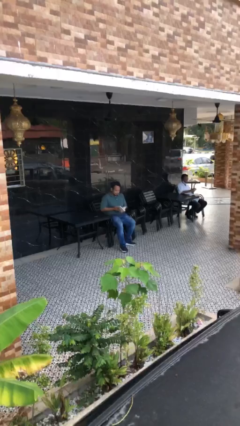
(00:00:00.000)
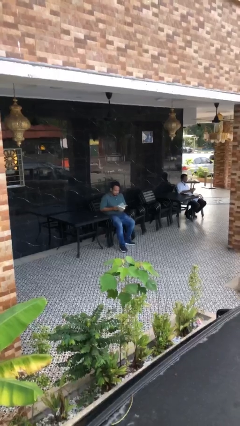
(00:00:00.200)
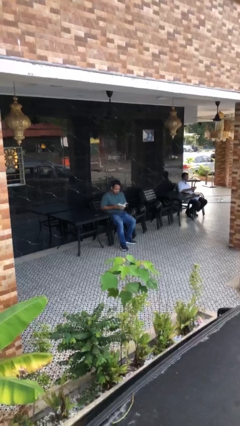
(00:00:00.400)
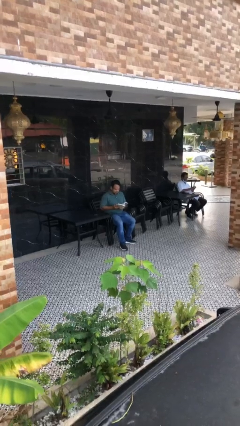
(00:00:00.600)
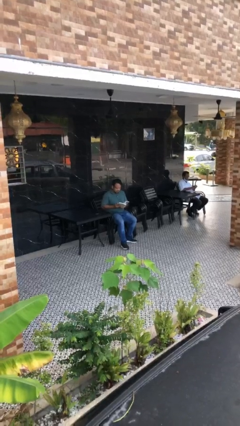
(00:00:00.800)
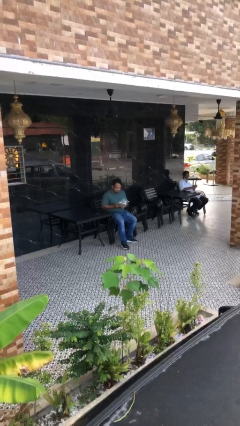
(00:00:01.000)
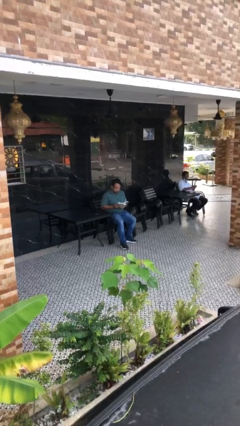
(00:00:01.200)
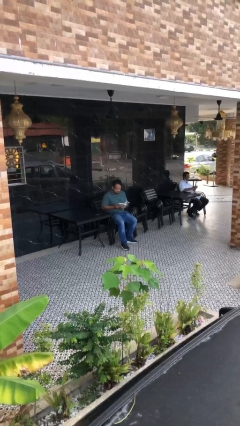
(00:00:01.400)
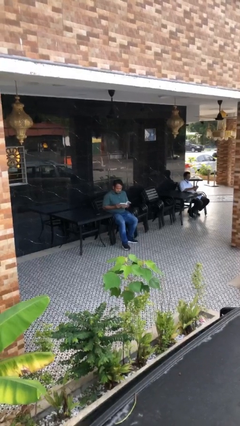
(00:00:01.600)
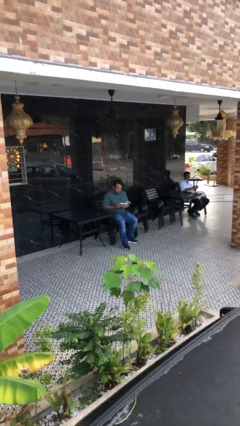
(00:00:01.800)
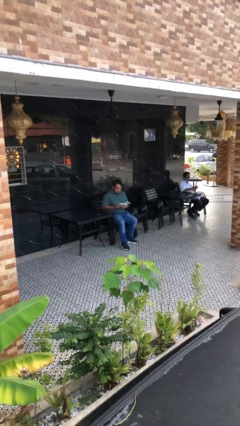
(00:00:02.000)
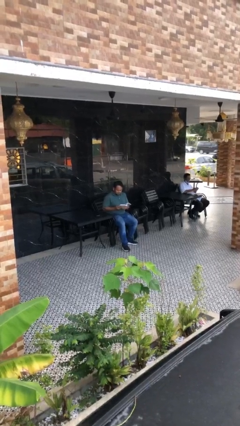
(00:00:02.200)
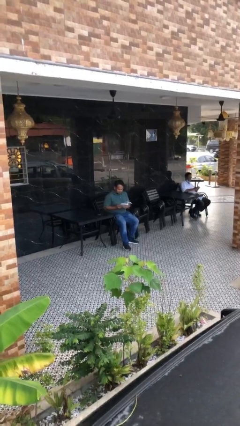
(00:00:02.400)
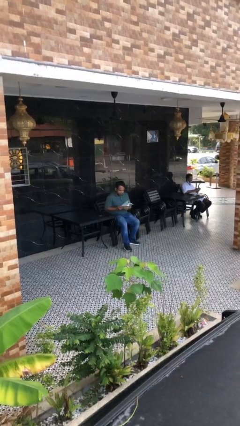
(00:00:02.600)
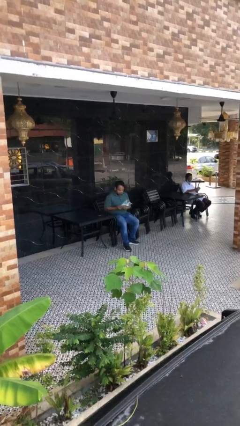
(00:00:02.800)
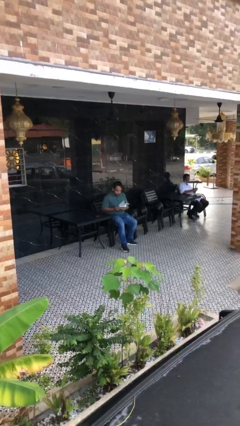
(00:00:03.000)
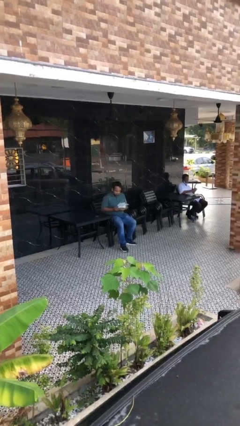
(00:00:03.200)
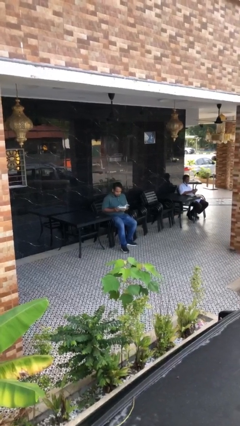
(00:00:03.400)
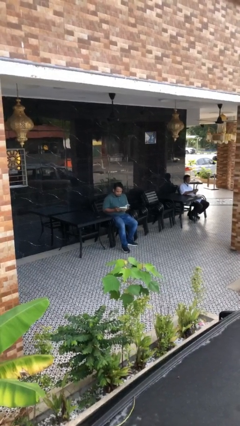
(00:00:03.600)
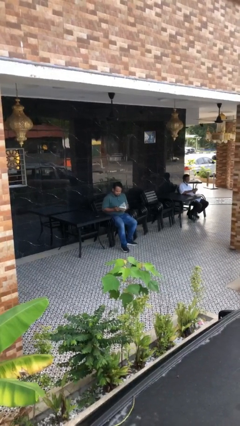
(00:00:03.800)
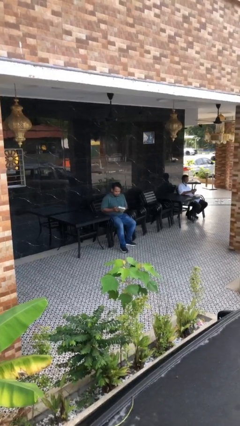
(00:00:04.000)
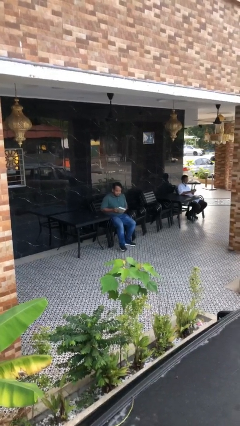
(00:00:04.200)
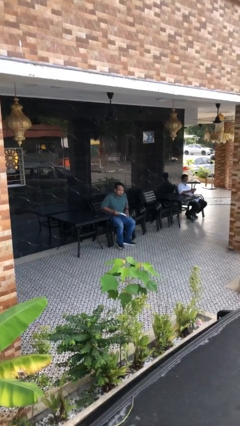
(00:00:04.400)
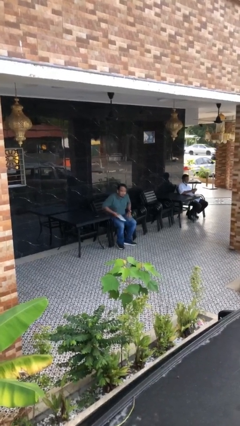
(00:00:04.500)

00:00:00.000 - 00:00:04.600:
person reads document

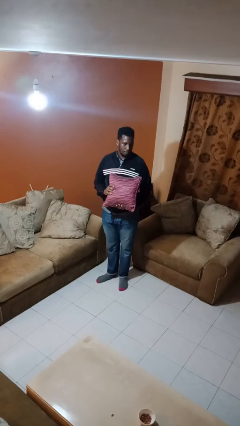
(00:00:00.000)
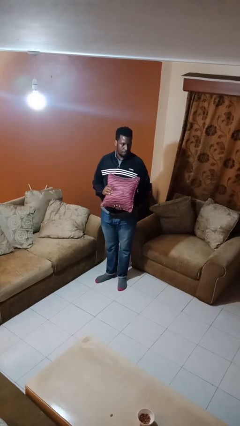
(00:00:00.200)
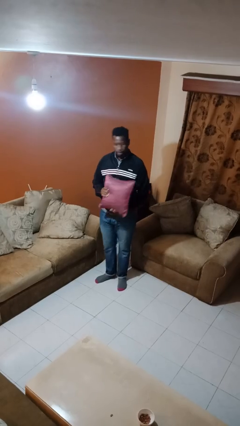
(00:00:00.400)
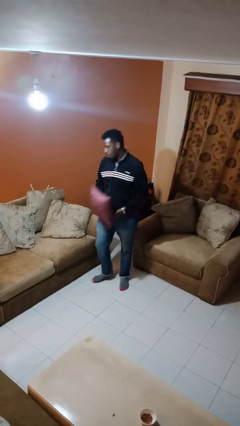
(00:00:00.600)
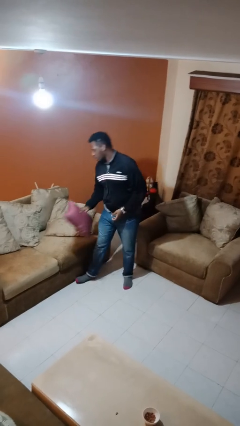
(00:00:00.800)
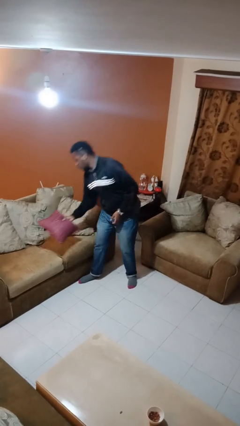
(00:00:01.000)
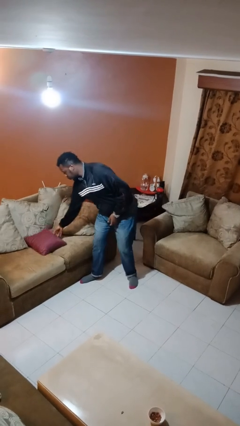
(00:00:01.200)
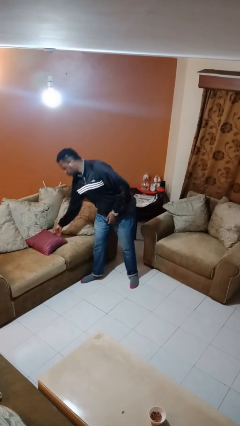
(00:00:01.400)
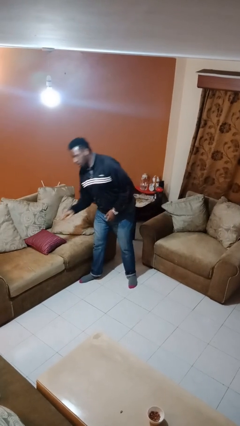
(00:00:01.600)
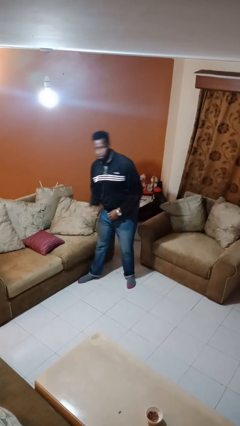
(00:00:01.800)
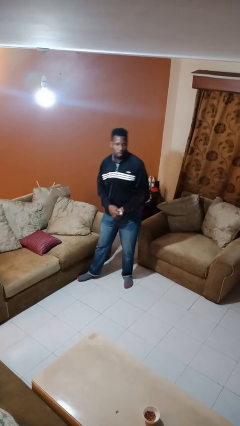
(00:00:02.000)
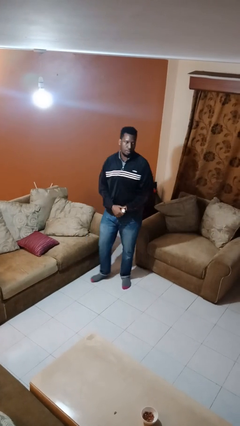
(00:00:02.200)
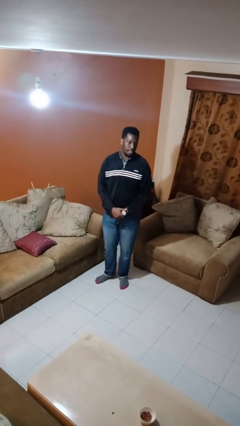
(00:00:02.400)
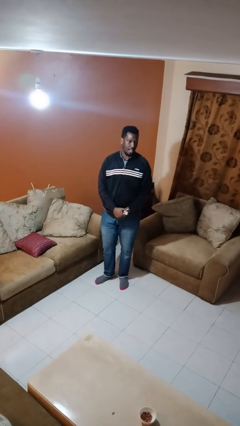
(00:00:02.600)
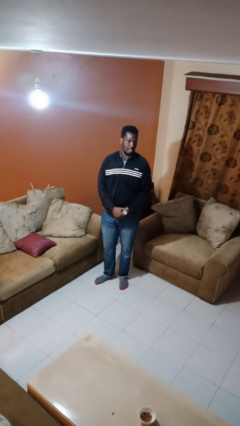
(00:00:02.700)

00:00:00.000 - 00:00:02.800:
person puts down object on couch

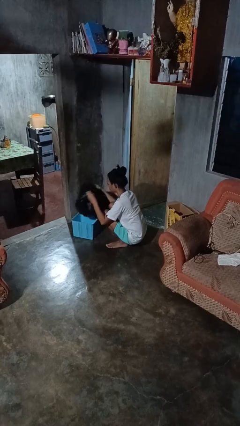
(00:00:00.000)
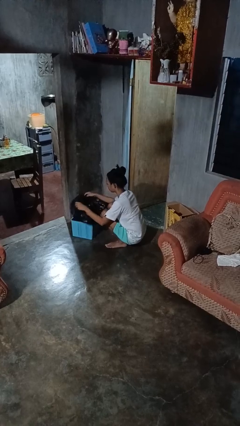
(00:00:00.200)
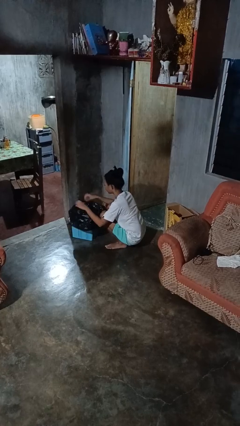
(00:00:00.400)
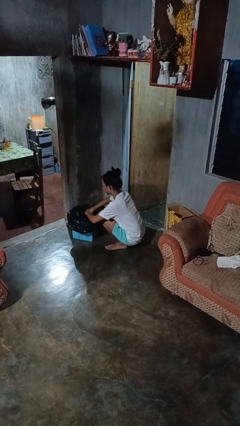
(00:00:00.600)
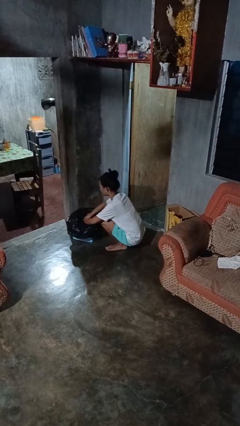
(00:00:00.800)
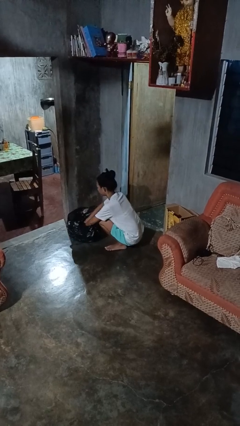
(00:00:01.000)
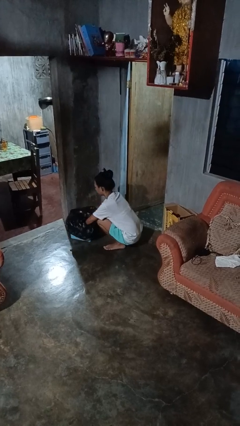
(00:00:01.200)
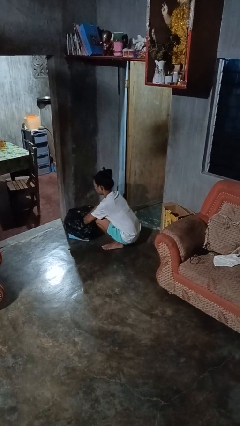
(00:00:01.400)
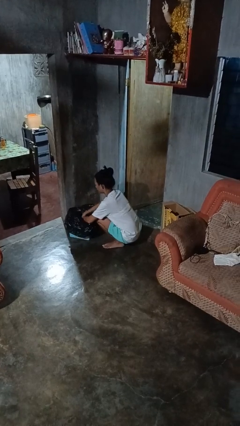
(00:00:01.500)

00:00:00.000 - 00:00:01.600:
person inserts trashbag into trashcan

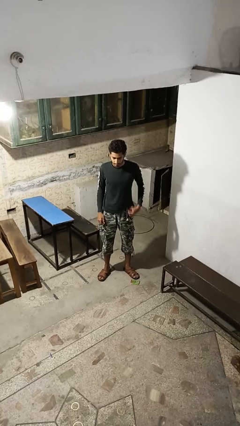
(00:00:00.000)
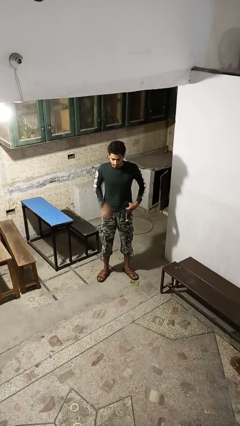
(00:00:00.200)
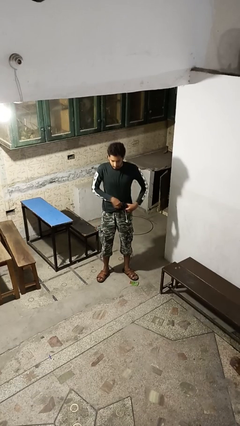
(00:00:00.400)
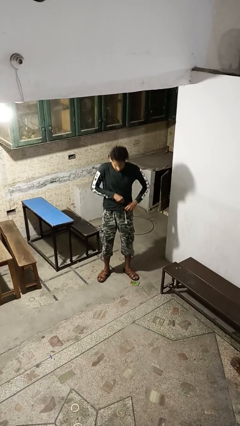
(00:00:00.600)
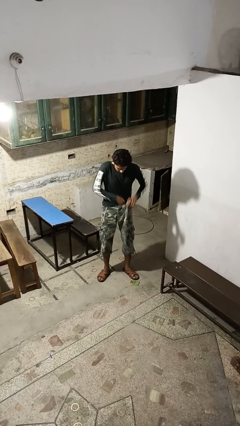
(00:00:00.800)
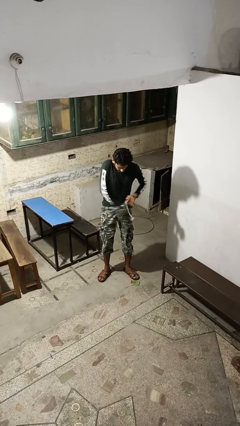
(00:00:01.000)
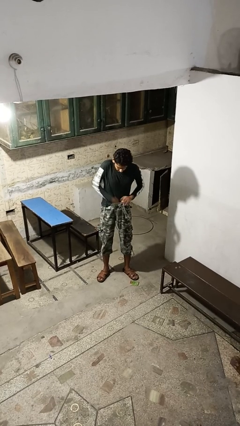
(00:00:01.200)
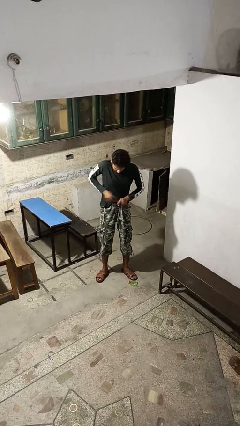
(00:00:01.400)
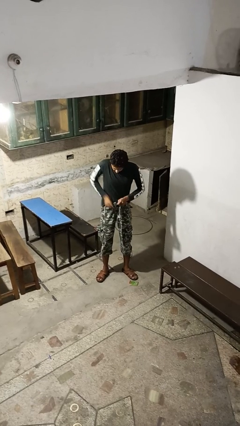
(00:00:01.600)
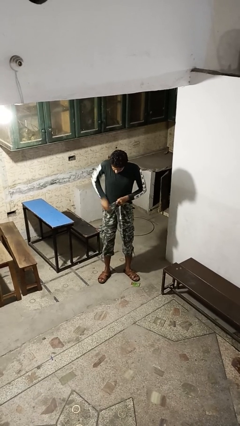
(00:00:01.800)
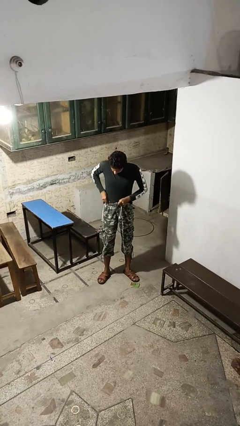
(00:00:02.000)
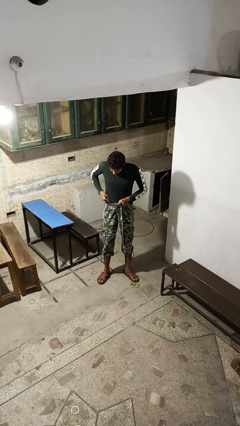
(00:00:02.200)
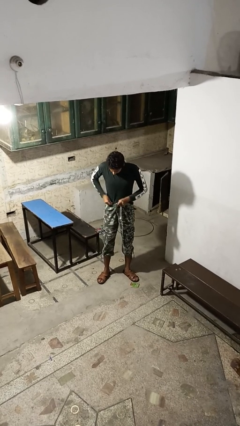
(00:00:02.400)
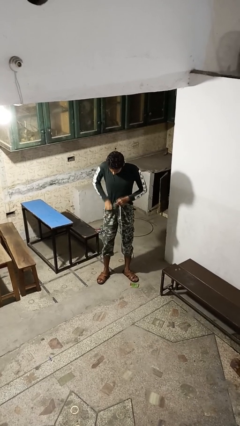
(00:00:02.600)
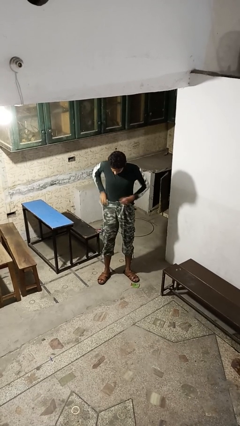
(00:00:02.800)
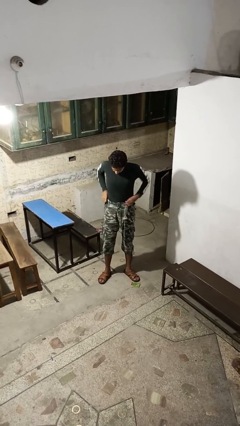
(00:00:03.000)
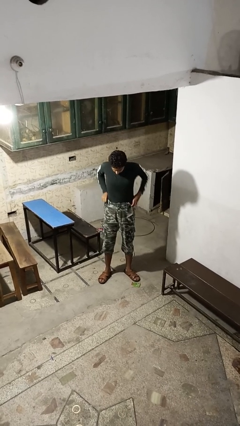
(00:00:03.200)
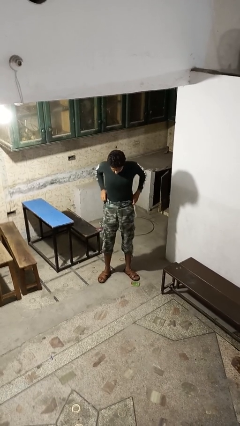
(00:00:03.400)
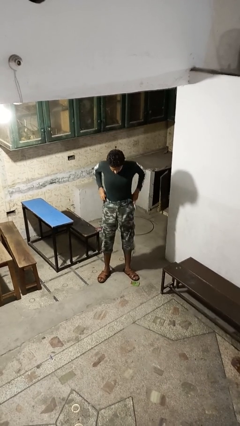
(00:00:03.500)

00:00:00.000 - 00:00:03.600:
person tucks in shirt

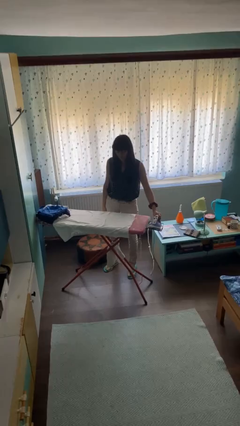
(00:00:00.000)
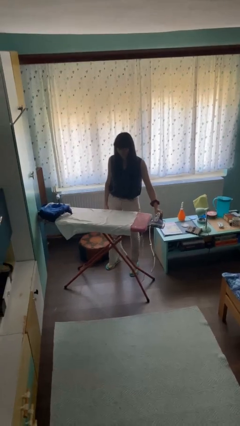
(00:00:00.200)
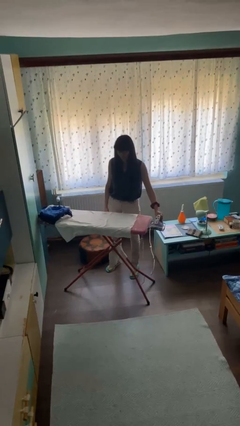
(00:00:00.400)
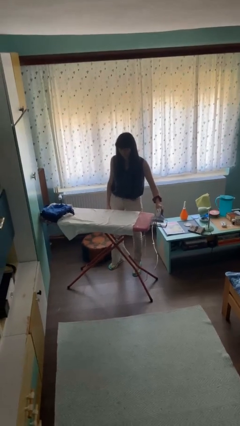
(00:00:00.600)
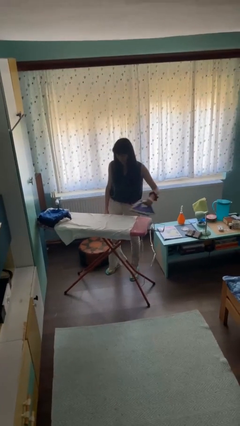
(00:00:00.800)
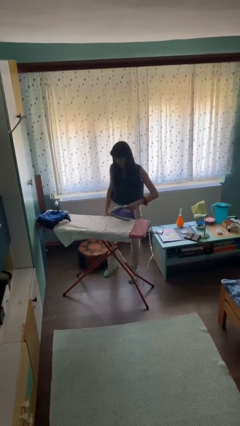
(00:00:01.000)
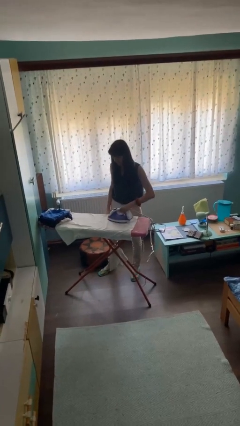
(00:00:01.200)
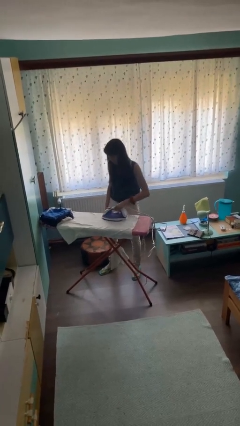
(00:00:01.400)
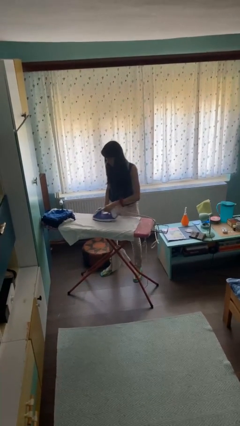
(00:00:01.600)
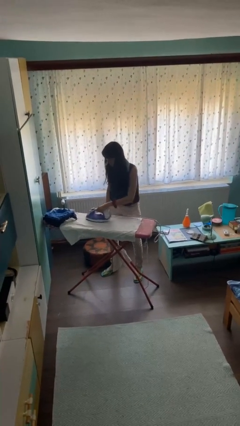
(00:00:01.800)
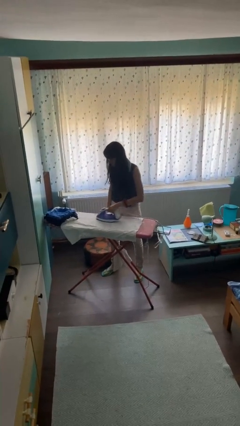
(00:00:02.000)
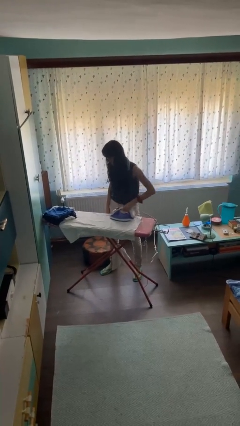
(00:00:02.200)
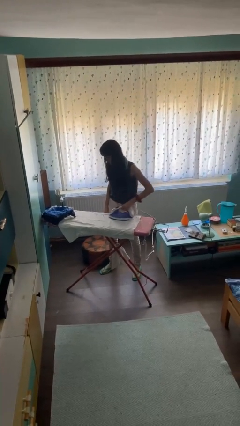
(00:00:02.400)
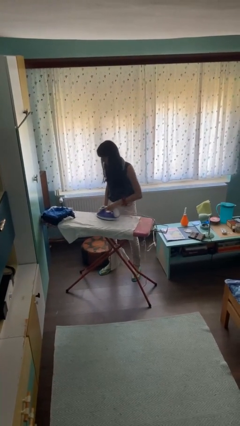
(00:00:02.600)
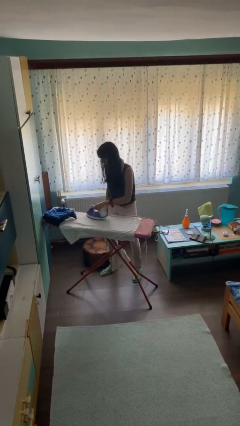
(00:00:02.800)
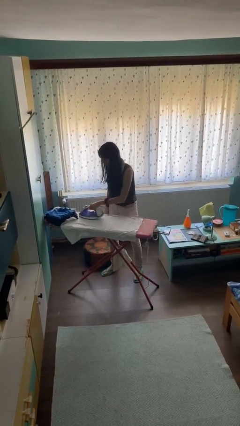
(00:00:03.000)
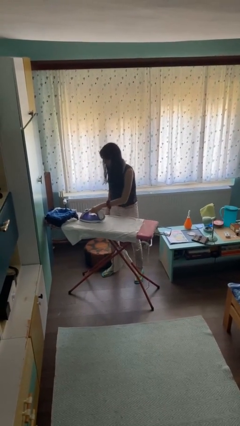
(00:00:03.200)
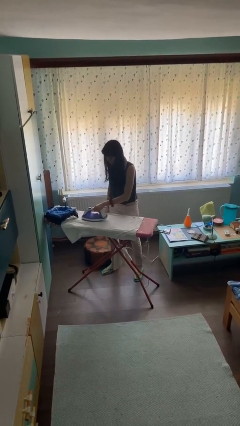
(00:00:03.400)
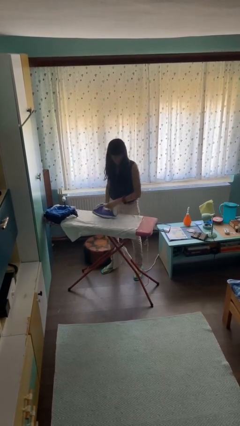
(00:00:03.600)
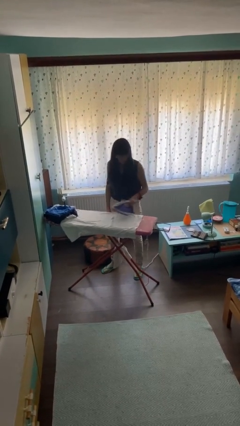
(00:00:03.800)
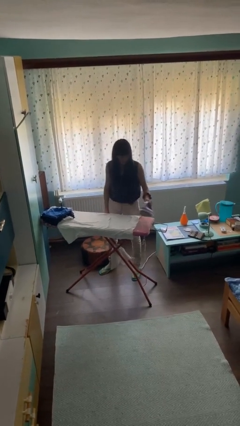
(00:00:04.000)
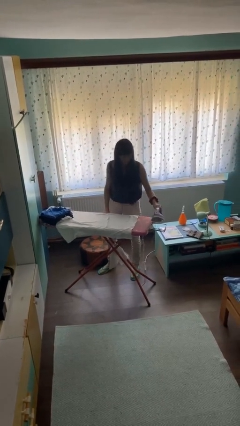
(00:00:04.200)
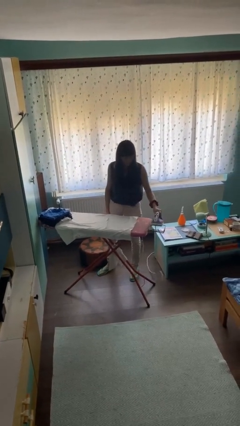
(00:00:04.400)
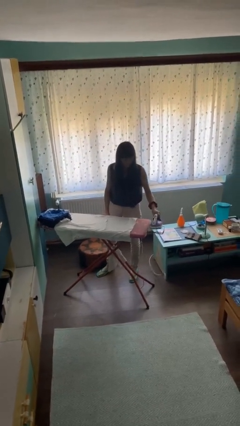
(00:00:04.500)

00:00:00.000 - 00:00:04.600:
person irons clothes

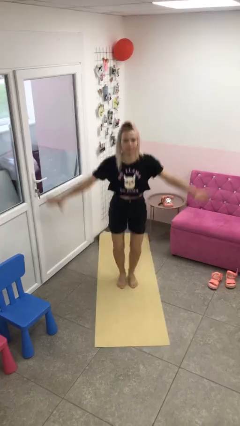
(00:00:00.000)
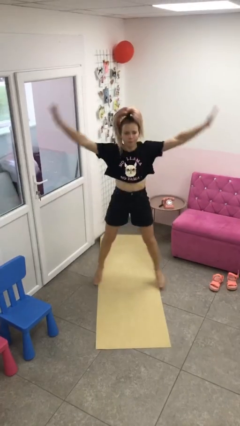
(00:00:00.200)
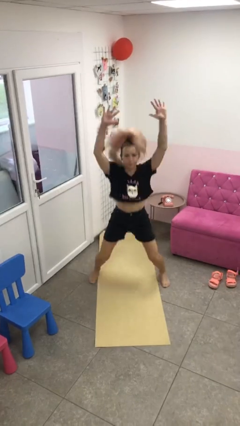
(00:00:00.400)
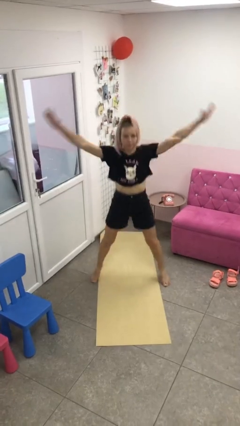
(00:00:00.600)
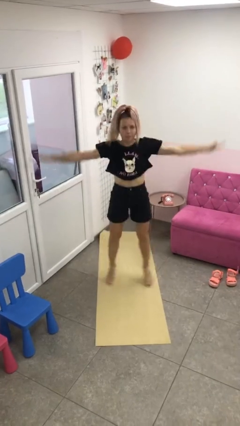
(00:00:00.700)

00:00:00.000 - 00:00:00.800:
person exercises with jumping jacks
